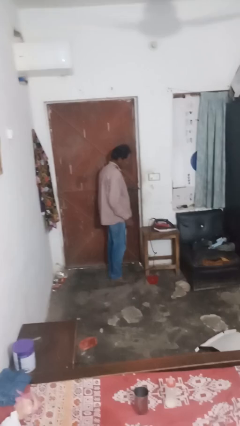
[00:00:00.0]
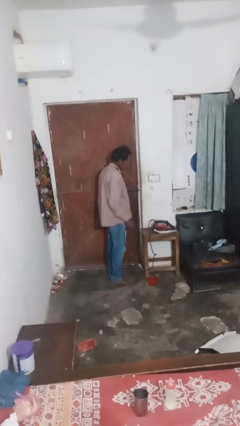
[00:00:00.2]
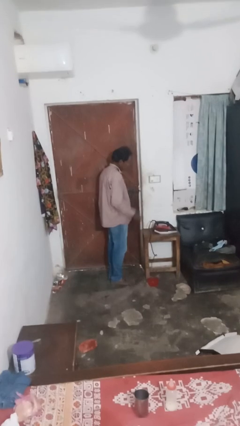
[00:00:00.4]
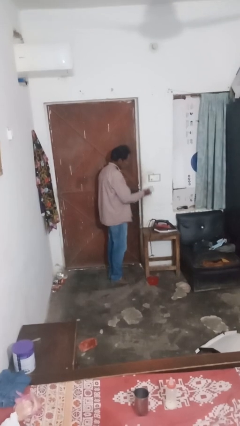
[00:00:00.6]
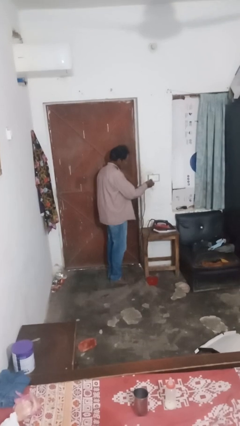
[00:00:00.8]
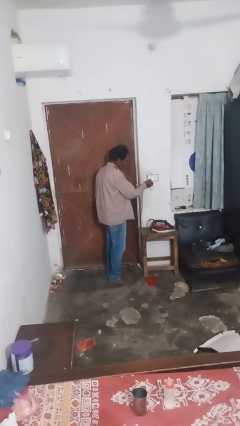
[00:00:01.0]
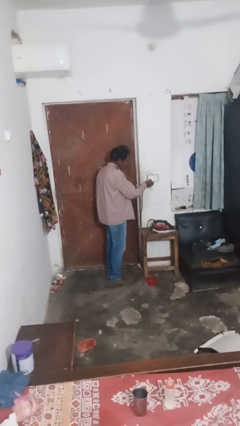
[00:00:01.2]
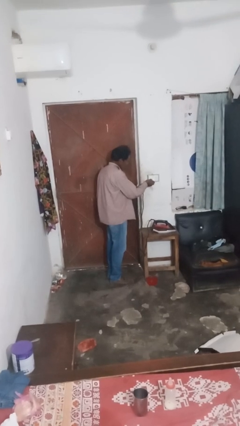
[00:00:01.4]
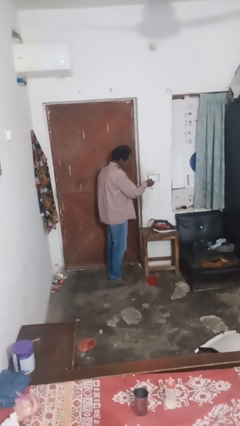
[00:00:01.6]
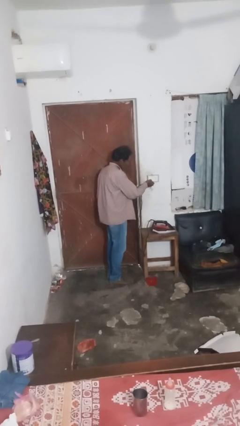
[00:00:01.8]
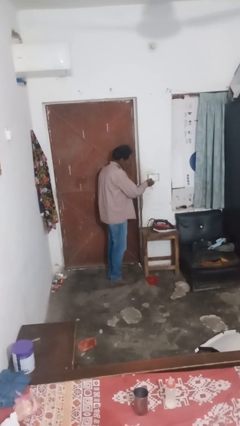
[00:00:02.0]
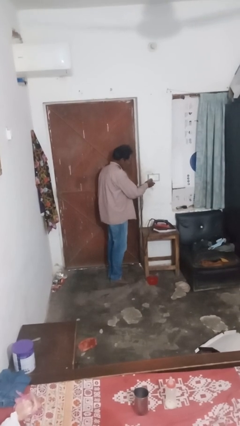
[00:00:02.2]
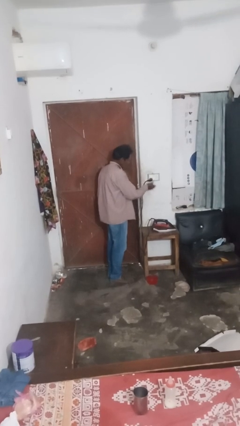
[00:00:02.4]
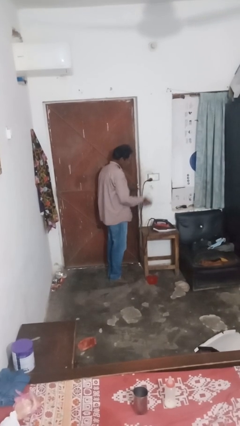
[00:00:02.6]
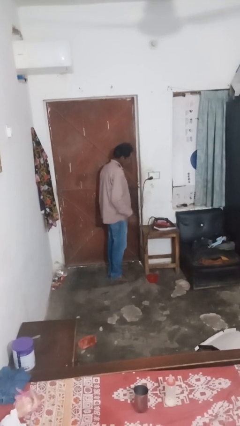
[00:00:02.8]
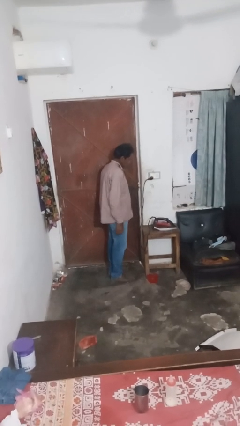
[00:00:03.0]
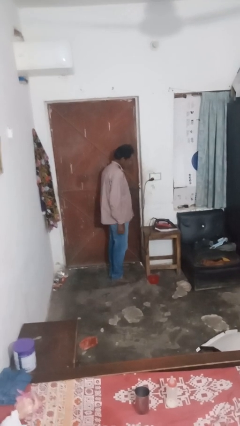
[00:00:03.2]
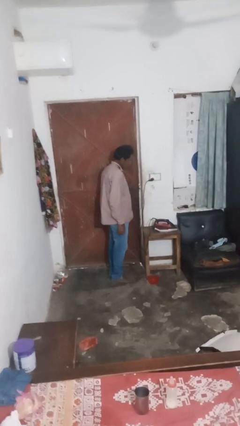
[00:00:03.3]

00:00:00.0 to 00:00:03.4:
person plugs into electrical socket

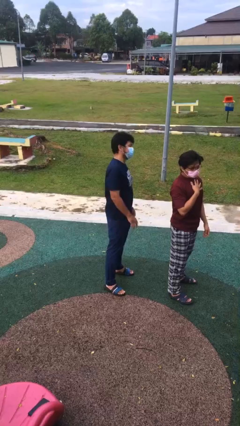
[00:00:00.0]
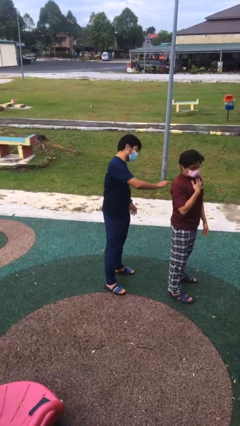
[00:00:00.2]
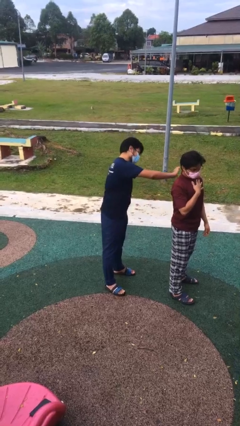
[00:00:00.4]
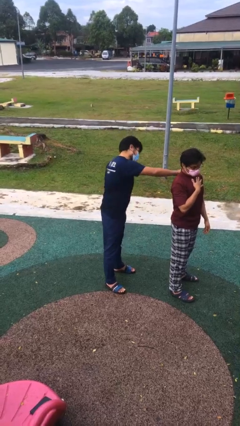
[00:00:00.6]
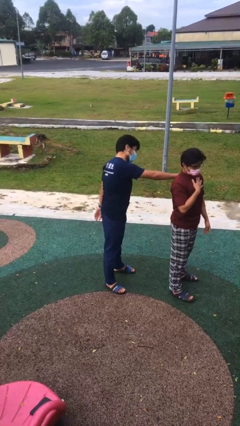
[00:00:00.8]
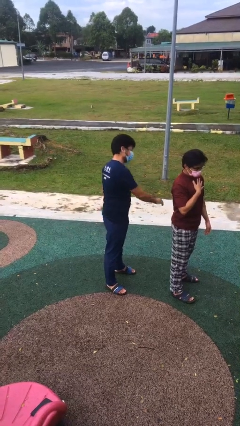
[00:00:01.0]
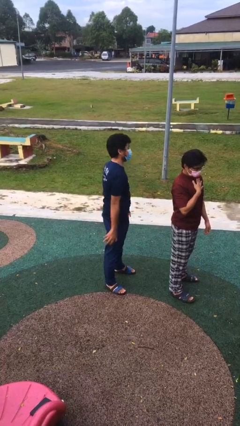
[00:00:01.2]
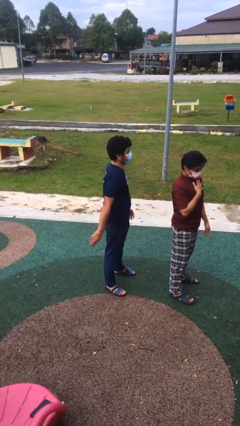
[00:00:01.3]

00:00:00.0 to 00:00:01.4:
person touches back of person

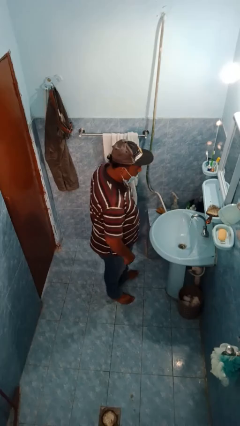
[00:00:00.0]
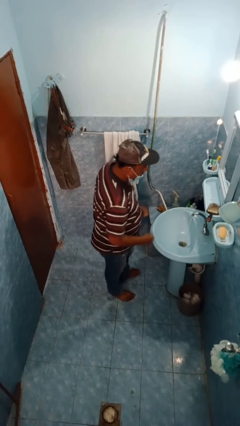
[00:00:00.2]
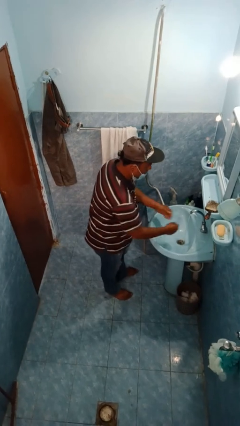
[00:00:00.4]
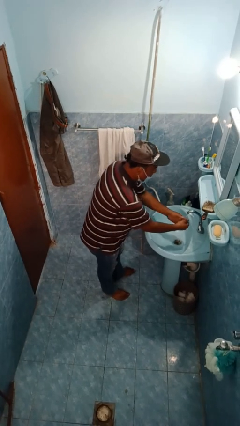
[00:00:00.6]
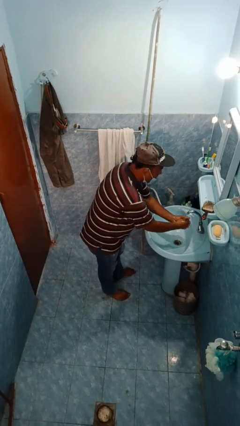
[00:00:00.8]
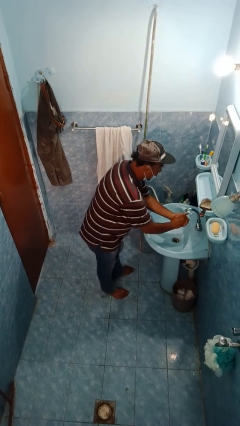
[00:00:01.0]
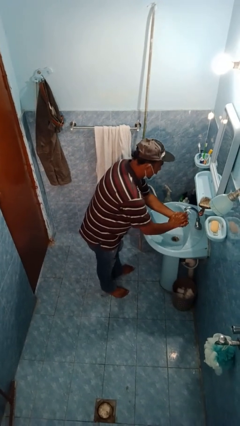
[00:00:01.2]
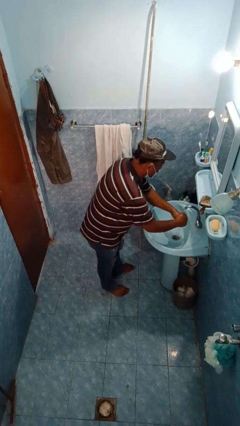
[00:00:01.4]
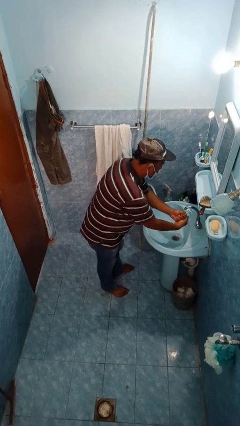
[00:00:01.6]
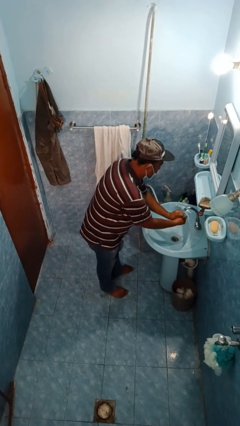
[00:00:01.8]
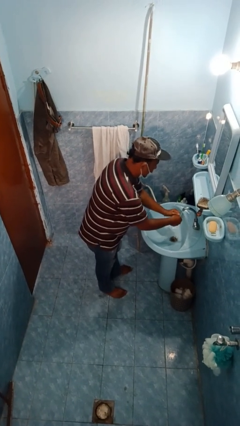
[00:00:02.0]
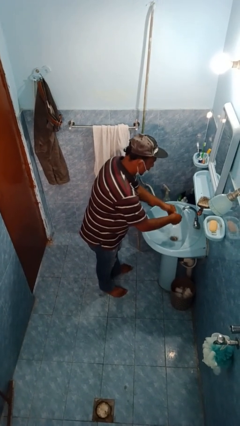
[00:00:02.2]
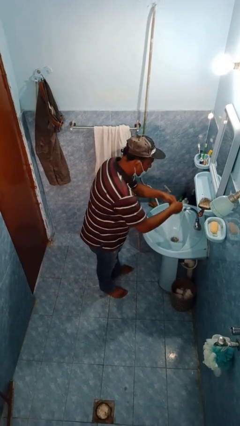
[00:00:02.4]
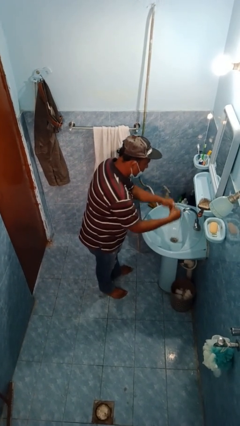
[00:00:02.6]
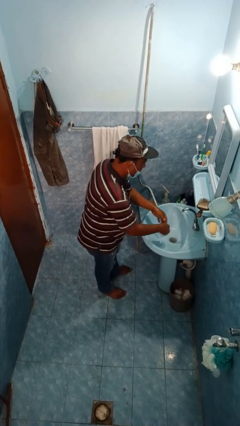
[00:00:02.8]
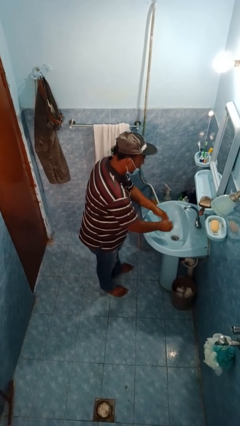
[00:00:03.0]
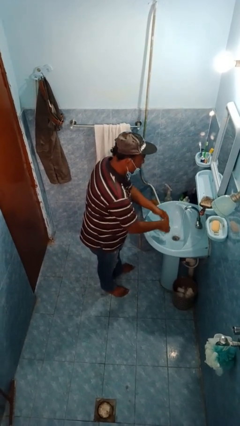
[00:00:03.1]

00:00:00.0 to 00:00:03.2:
person washes hands

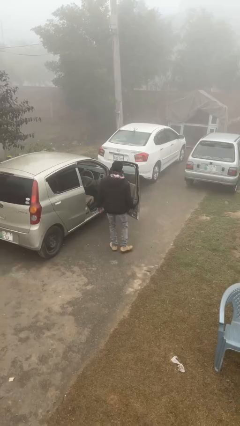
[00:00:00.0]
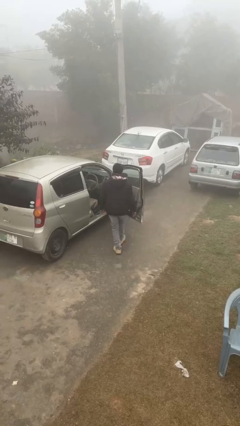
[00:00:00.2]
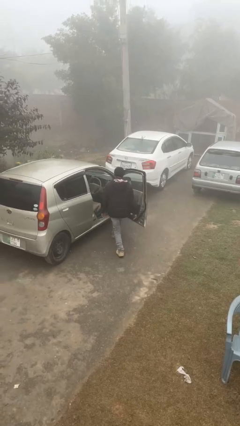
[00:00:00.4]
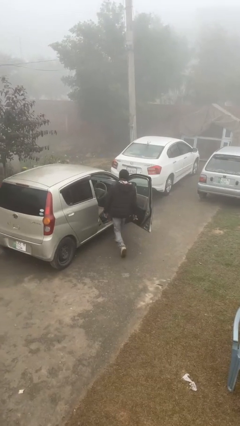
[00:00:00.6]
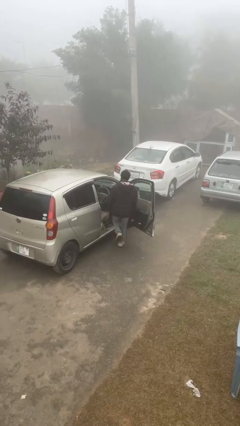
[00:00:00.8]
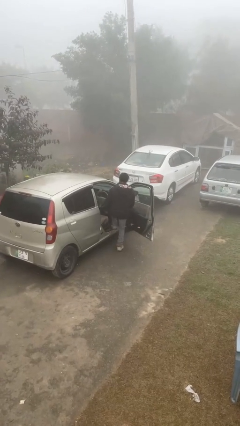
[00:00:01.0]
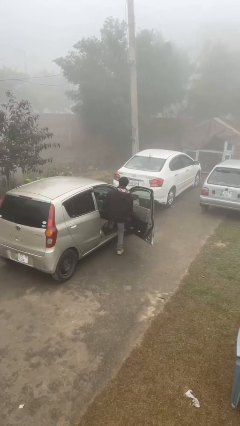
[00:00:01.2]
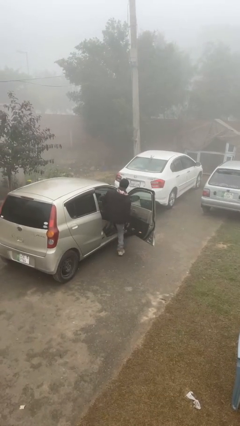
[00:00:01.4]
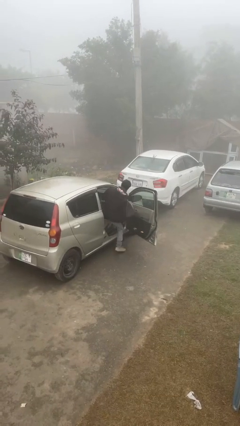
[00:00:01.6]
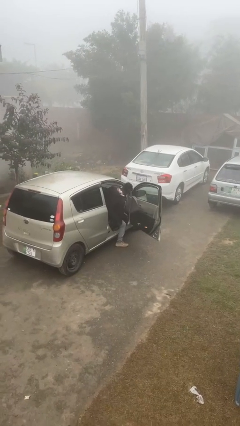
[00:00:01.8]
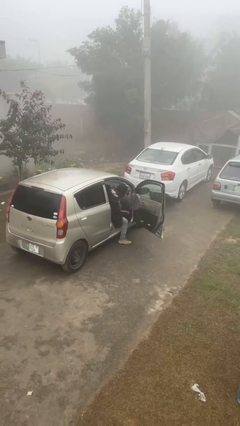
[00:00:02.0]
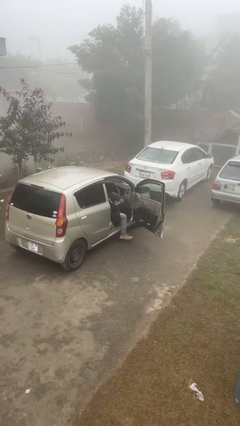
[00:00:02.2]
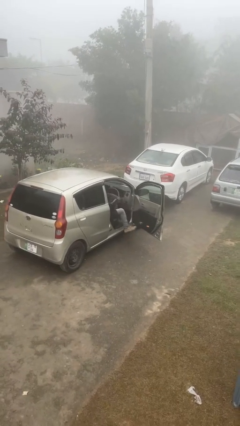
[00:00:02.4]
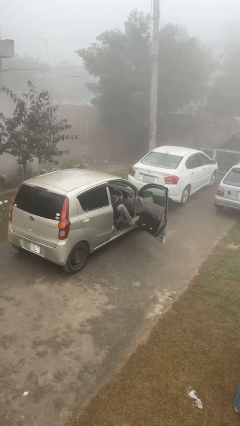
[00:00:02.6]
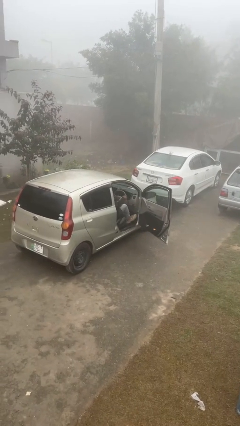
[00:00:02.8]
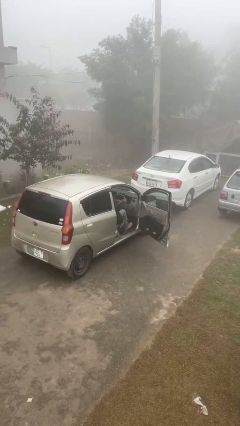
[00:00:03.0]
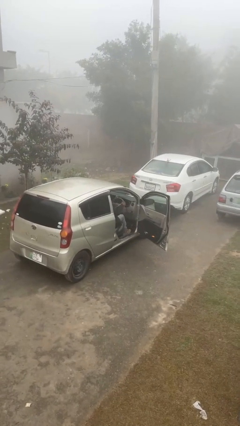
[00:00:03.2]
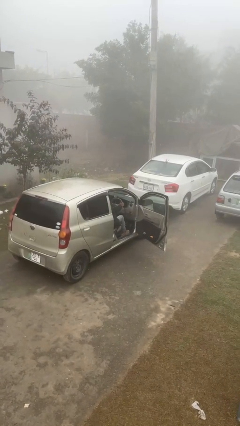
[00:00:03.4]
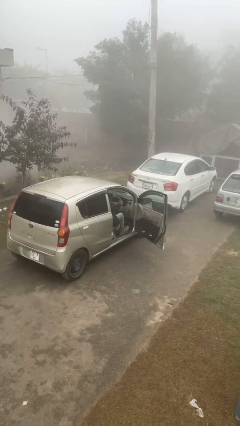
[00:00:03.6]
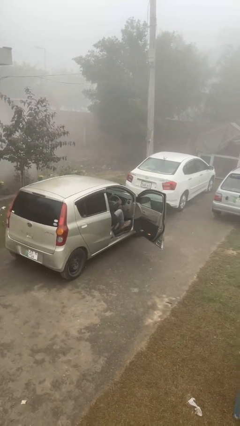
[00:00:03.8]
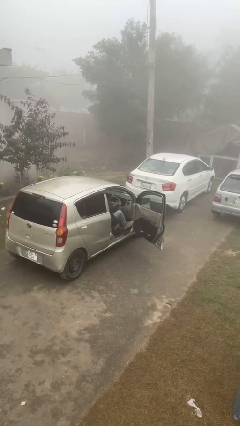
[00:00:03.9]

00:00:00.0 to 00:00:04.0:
person enters car

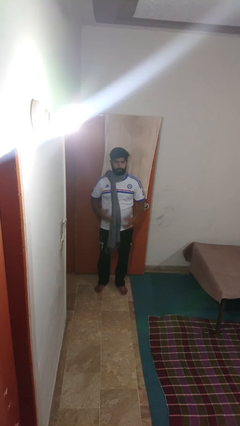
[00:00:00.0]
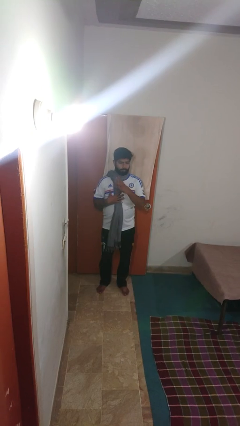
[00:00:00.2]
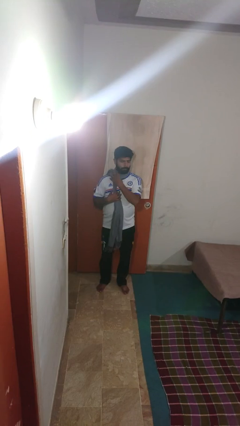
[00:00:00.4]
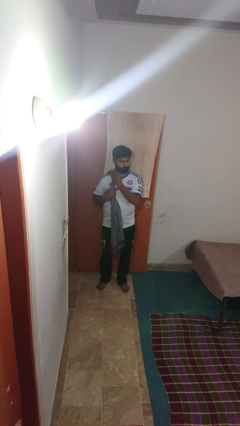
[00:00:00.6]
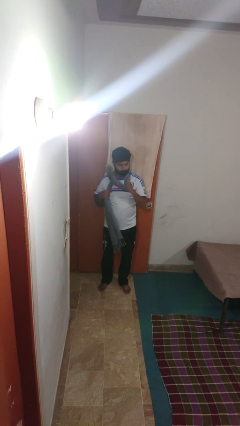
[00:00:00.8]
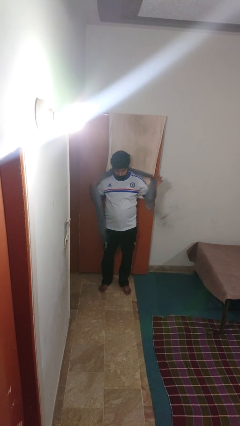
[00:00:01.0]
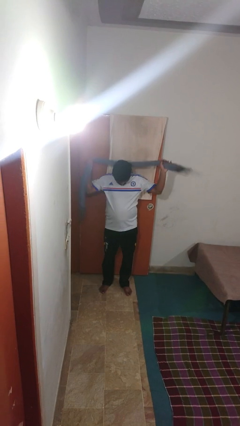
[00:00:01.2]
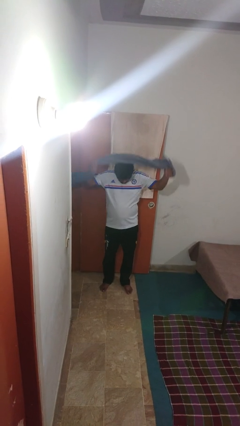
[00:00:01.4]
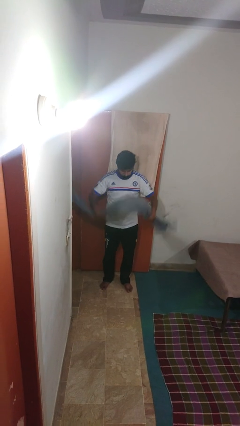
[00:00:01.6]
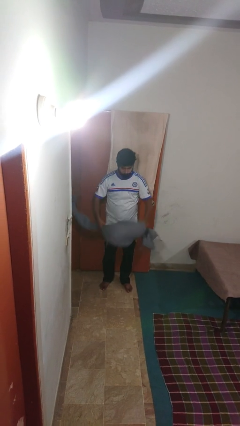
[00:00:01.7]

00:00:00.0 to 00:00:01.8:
person takes off scarf

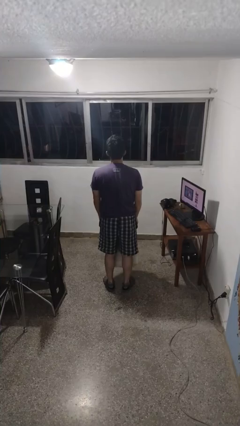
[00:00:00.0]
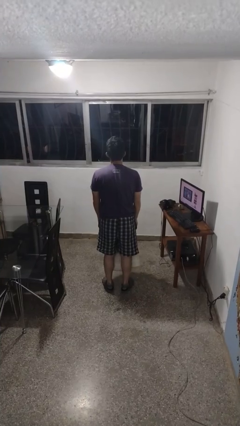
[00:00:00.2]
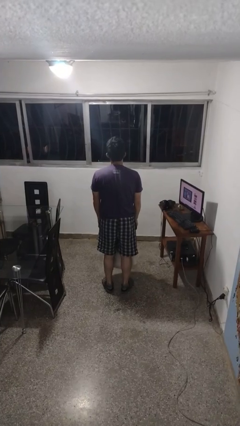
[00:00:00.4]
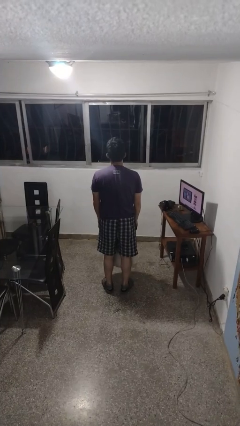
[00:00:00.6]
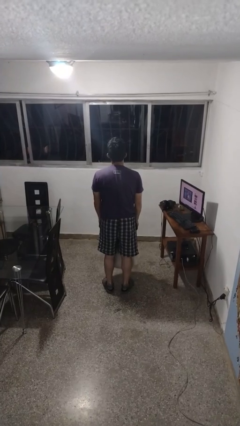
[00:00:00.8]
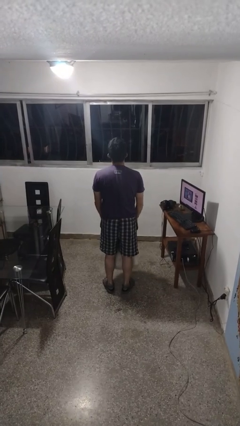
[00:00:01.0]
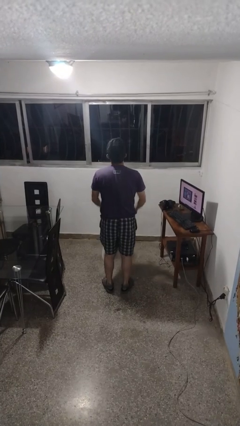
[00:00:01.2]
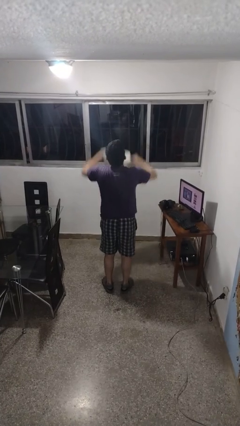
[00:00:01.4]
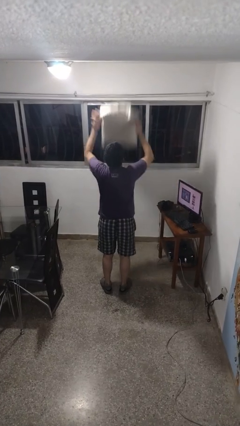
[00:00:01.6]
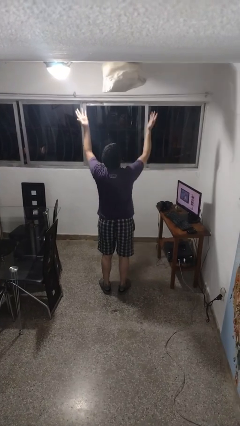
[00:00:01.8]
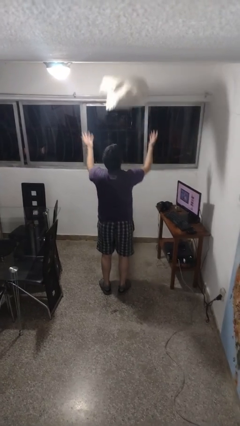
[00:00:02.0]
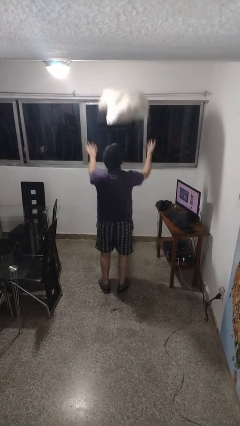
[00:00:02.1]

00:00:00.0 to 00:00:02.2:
person drops object

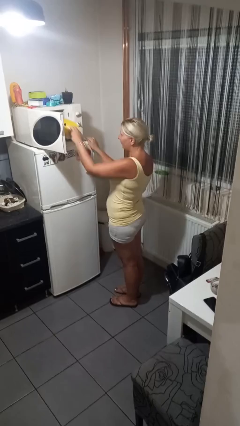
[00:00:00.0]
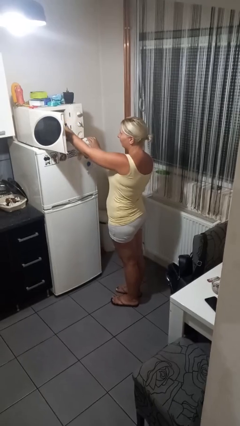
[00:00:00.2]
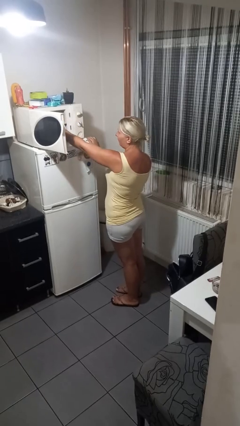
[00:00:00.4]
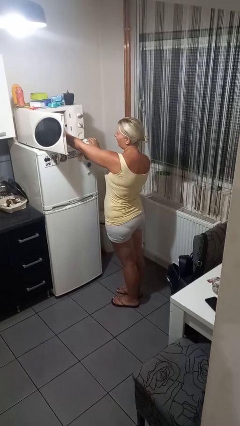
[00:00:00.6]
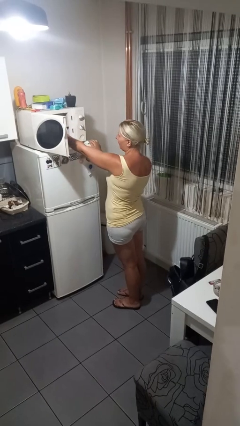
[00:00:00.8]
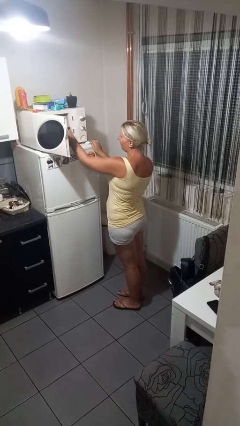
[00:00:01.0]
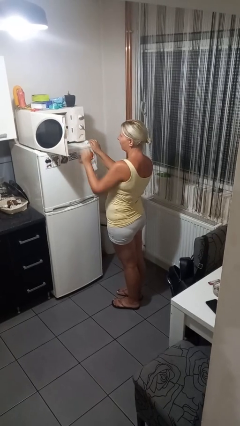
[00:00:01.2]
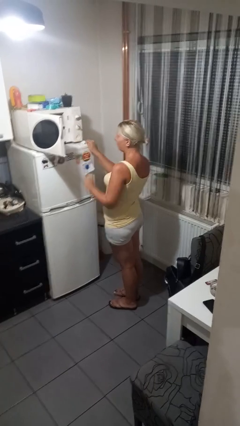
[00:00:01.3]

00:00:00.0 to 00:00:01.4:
person puts object into microwave
